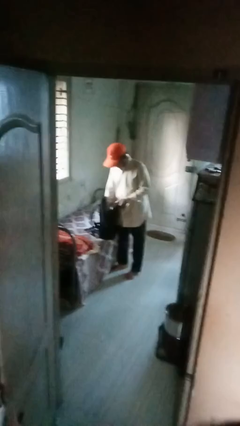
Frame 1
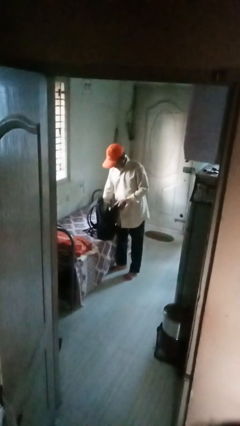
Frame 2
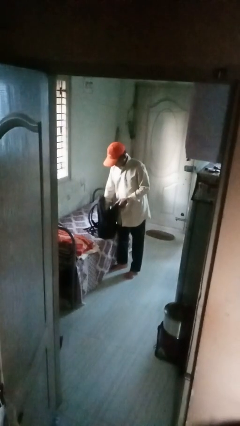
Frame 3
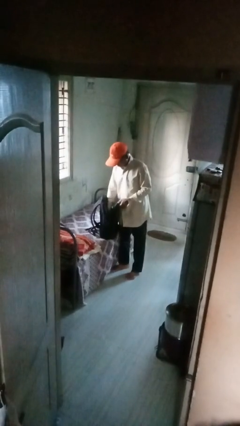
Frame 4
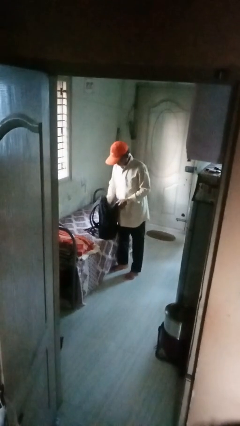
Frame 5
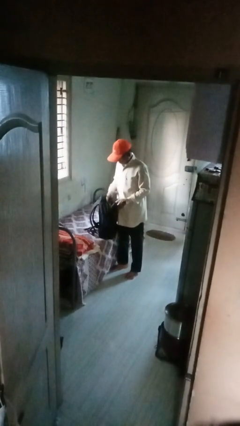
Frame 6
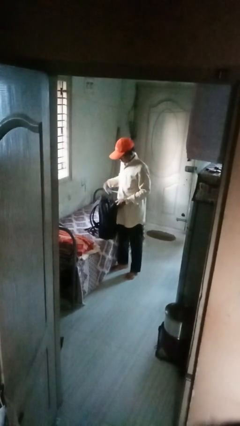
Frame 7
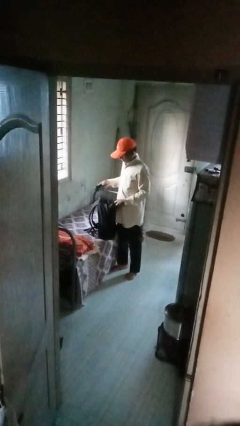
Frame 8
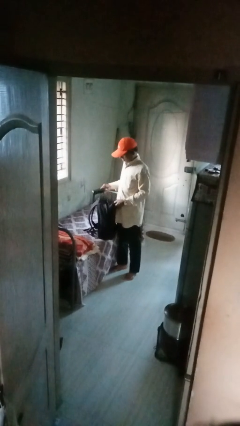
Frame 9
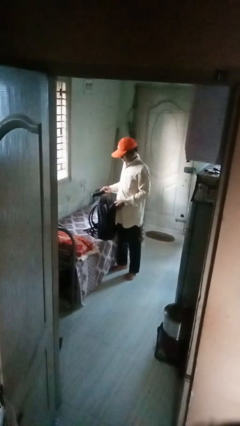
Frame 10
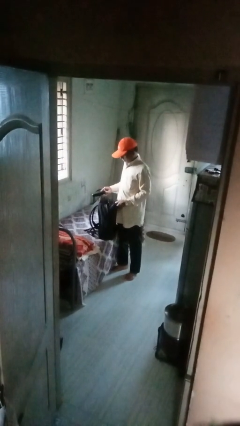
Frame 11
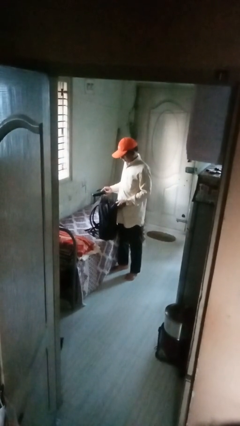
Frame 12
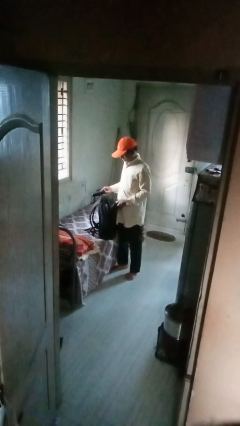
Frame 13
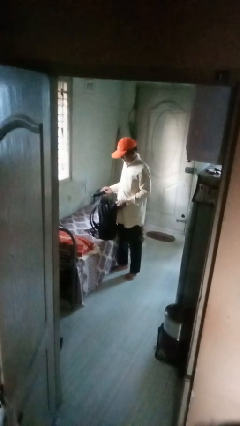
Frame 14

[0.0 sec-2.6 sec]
person takes object from backpack

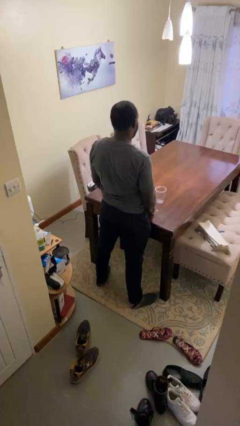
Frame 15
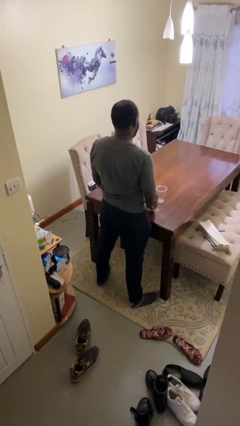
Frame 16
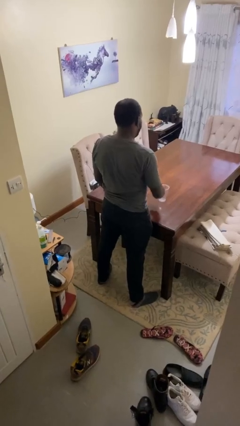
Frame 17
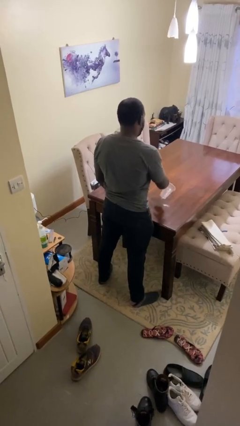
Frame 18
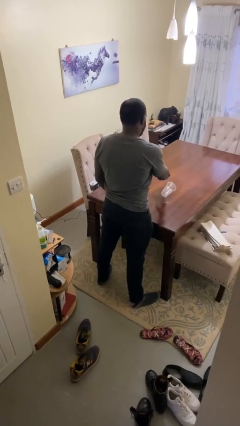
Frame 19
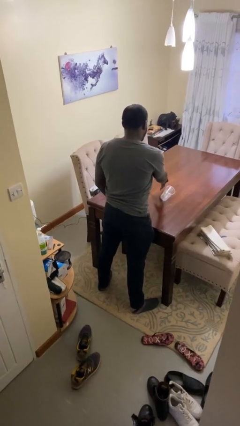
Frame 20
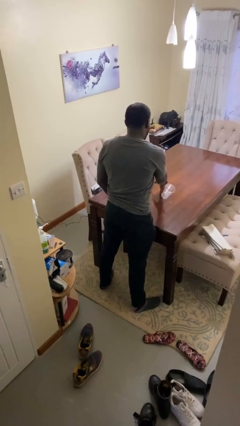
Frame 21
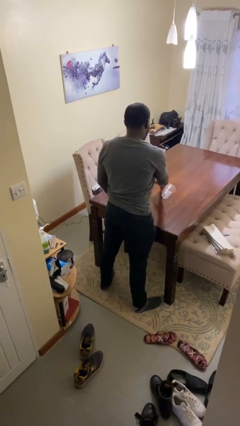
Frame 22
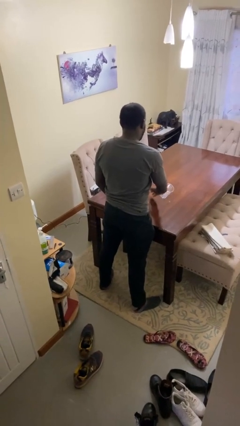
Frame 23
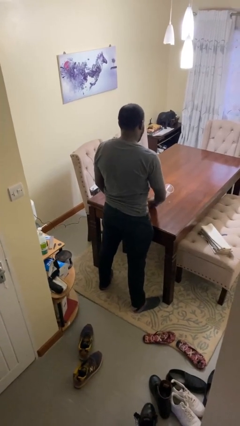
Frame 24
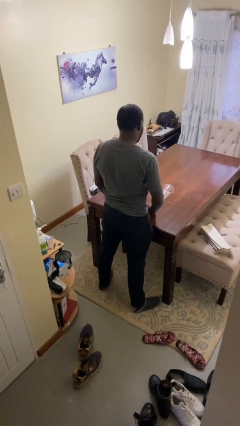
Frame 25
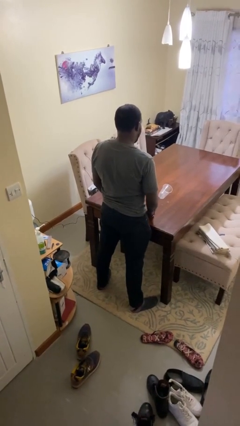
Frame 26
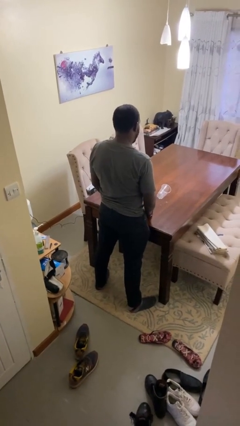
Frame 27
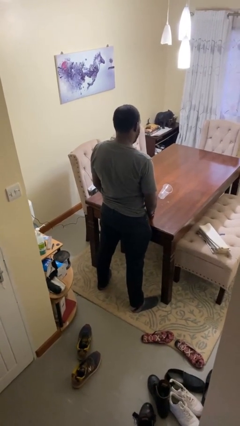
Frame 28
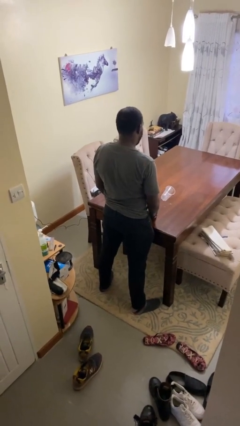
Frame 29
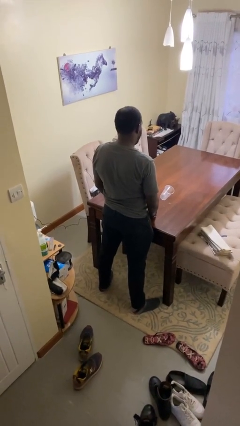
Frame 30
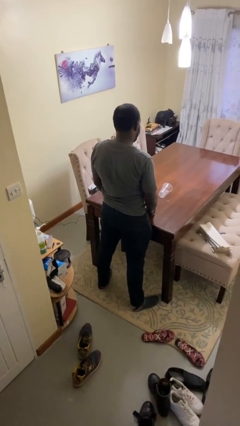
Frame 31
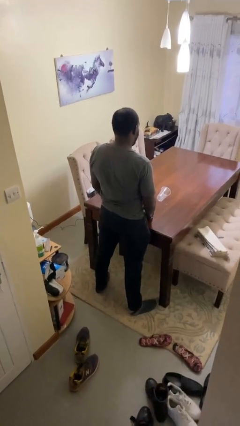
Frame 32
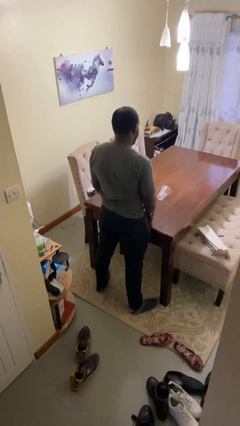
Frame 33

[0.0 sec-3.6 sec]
person knocks over glass

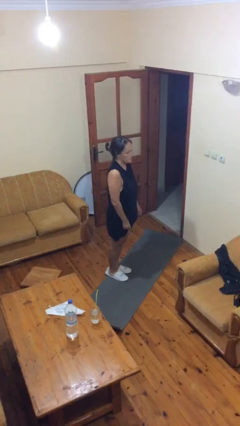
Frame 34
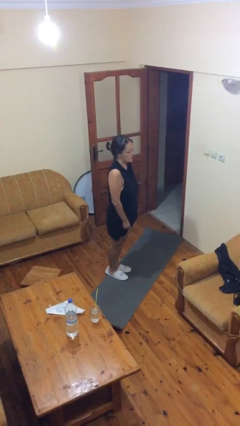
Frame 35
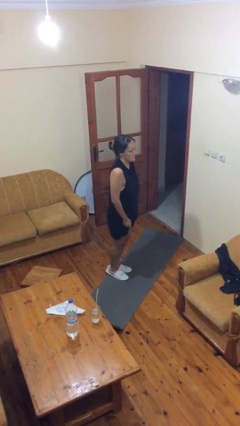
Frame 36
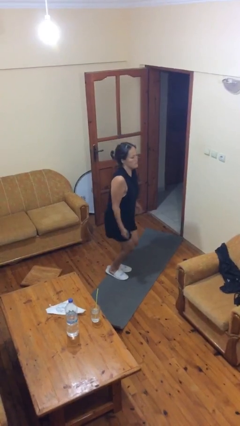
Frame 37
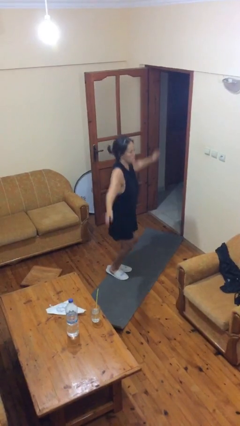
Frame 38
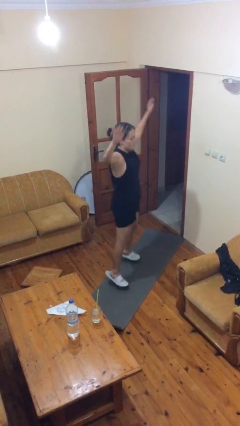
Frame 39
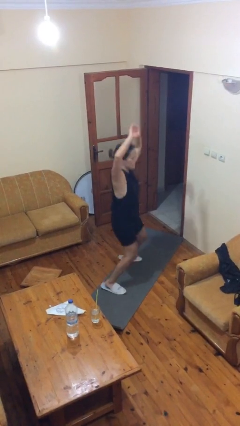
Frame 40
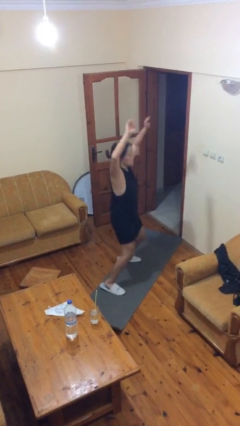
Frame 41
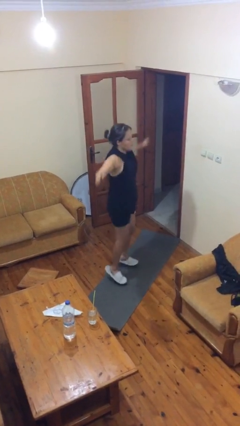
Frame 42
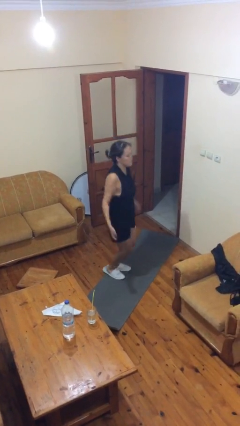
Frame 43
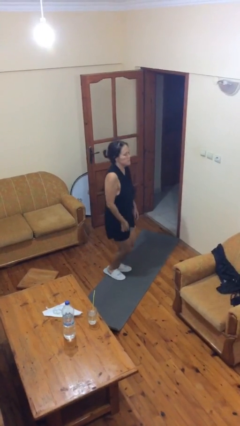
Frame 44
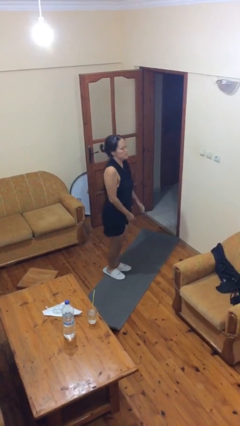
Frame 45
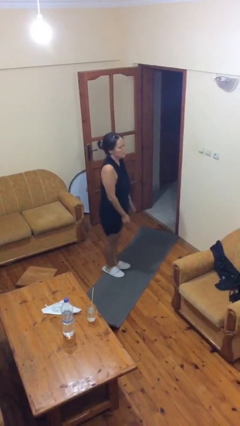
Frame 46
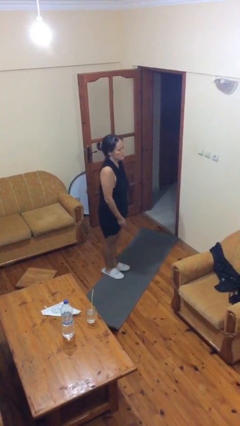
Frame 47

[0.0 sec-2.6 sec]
person exercises with jumping jacks

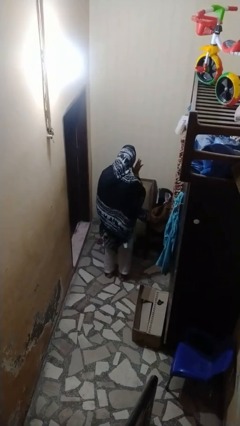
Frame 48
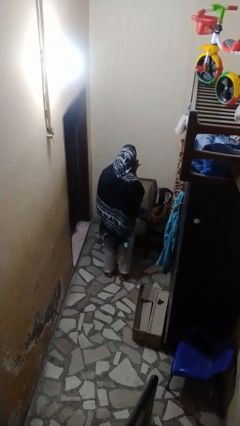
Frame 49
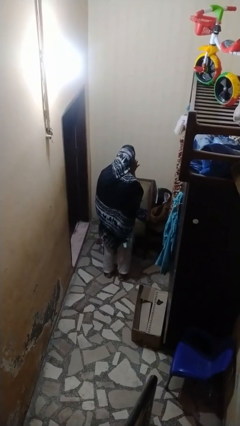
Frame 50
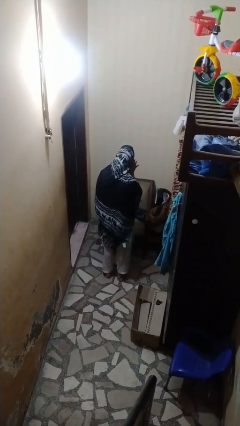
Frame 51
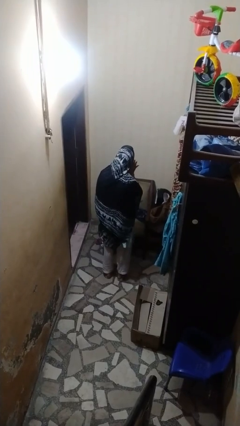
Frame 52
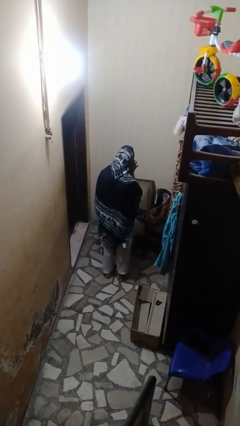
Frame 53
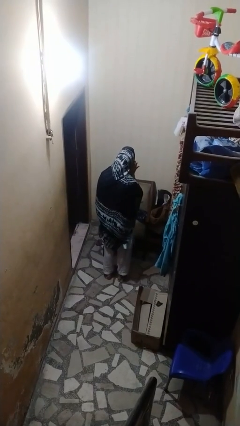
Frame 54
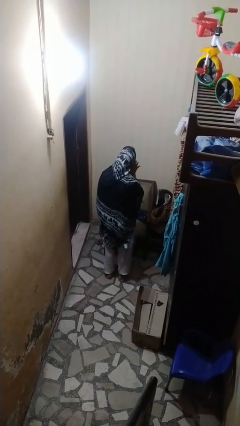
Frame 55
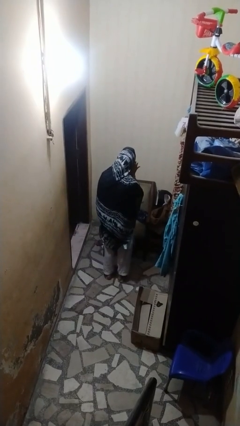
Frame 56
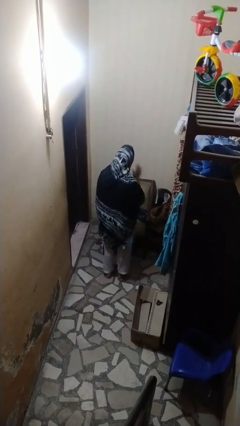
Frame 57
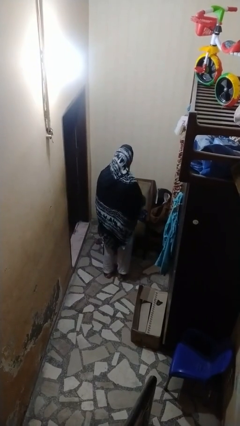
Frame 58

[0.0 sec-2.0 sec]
person gestures listen closely

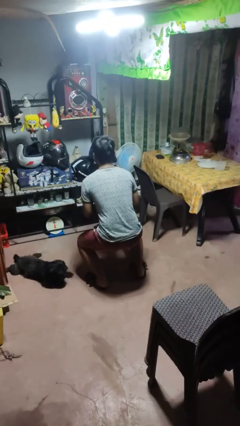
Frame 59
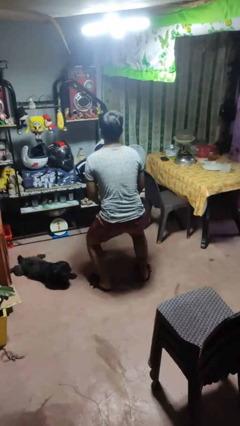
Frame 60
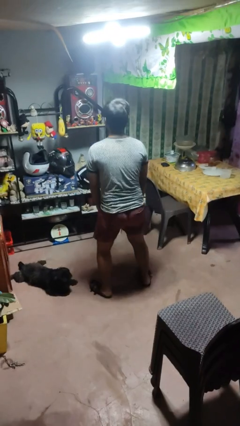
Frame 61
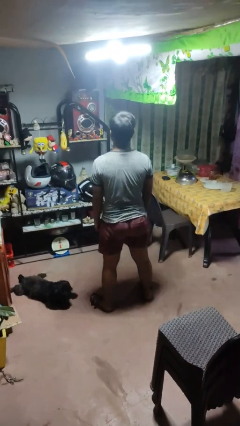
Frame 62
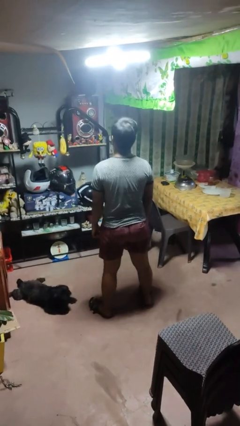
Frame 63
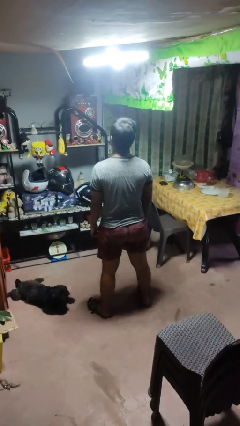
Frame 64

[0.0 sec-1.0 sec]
person stands up

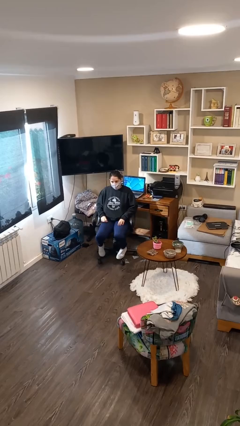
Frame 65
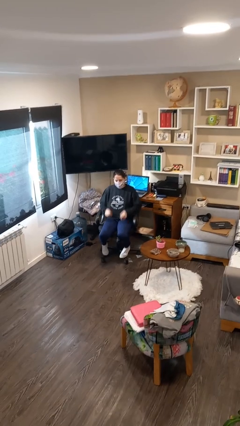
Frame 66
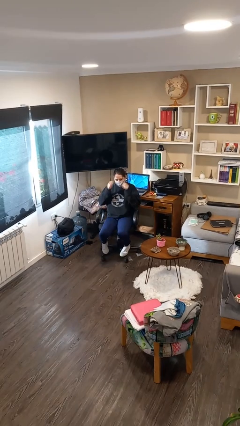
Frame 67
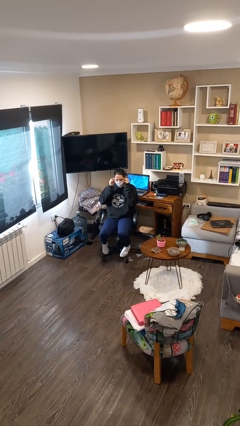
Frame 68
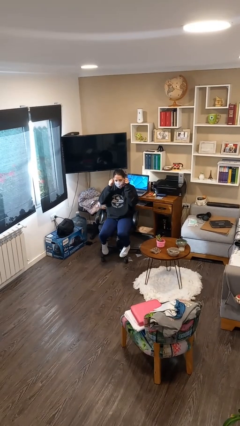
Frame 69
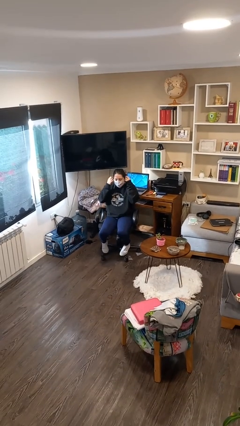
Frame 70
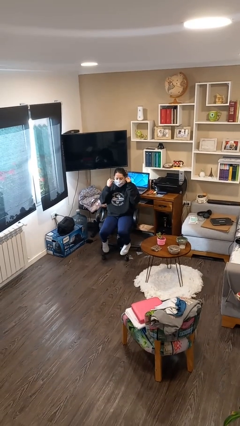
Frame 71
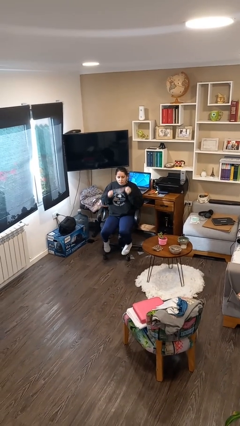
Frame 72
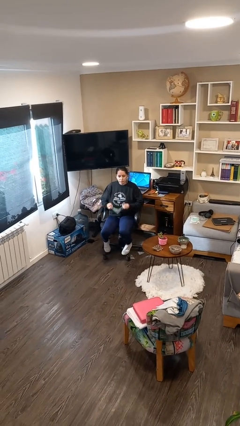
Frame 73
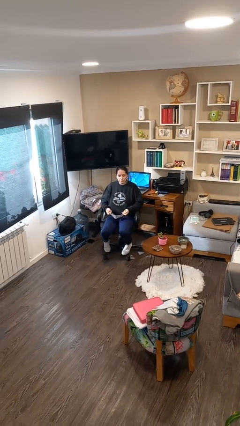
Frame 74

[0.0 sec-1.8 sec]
person takes off facemask

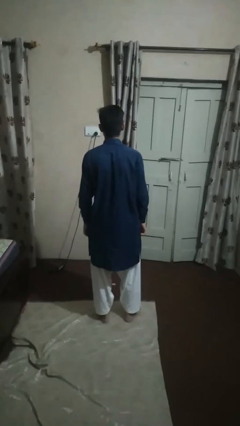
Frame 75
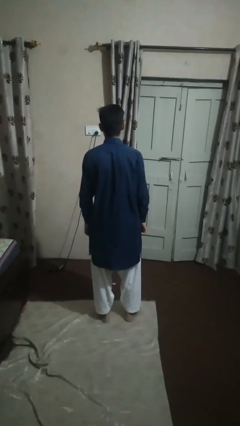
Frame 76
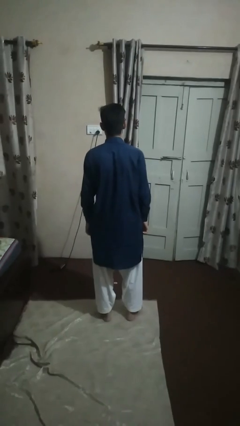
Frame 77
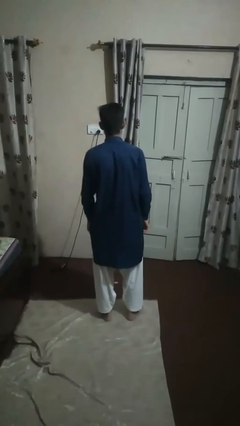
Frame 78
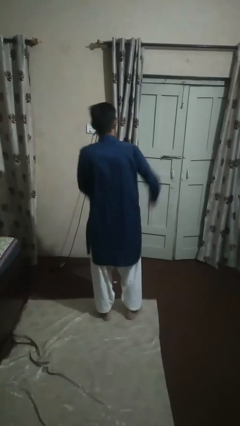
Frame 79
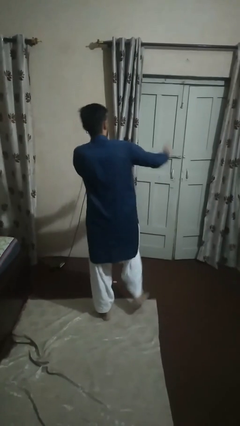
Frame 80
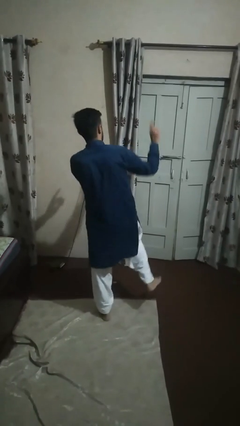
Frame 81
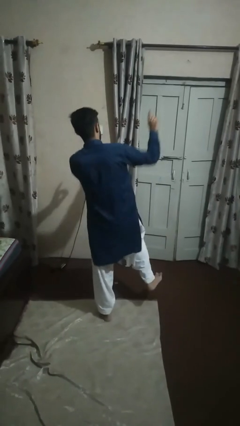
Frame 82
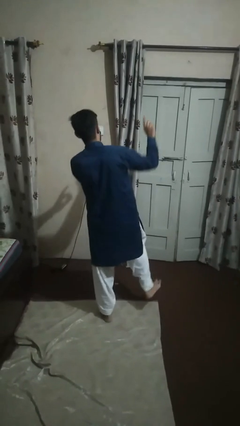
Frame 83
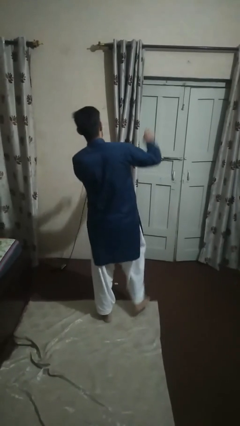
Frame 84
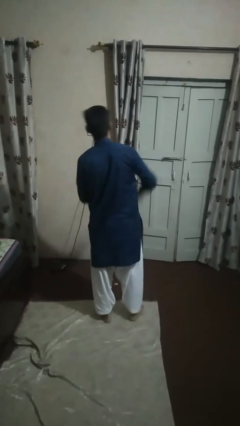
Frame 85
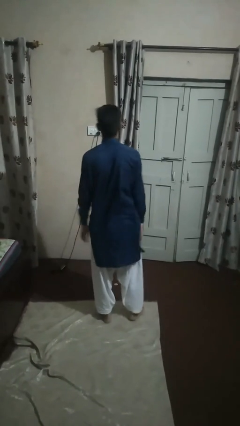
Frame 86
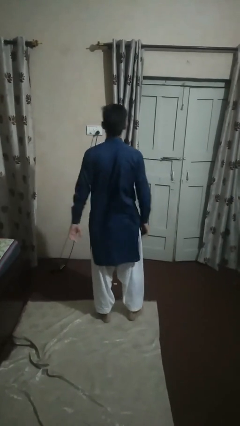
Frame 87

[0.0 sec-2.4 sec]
person dances in place

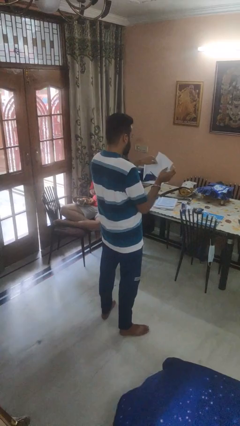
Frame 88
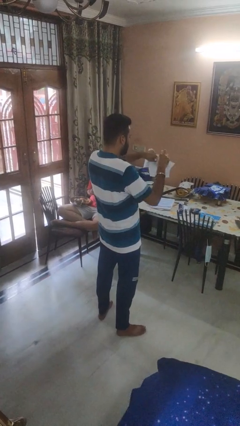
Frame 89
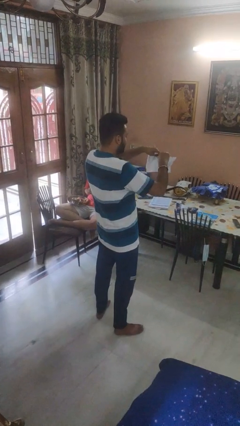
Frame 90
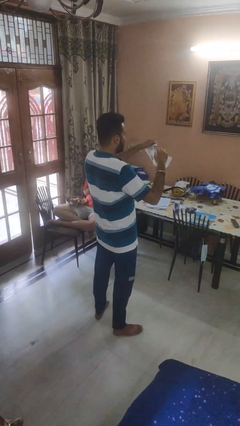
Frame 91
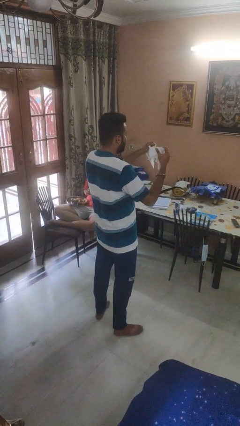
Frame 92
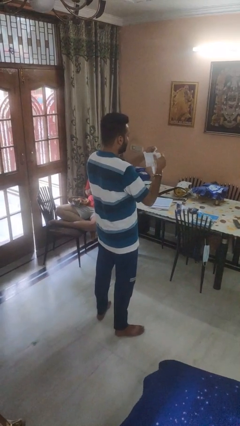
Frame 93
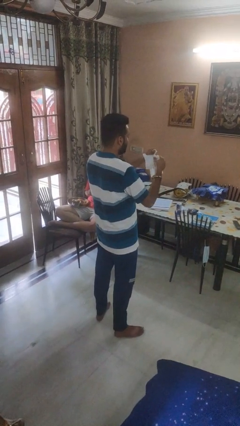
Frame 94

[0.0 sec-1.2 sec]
person tears paper
